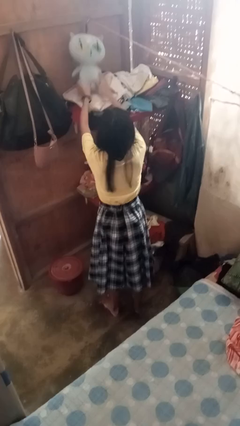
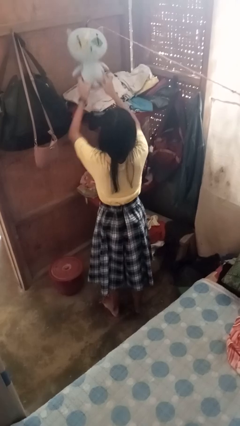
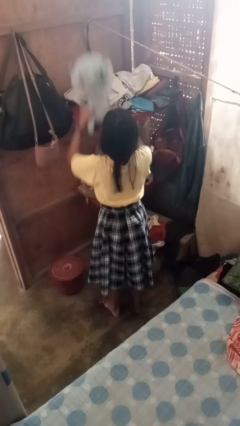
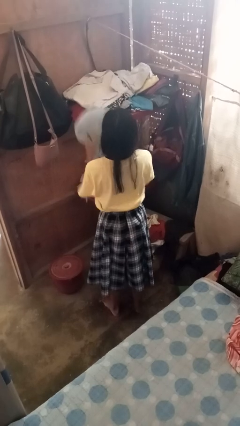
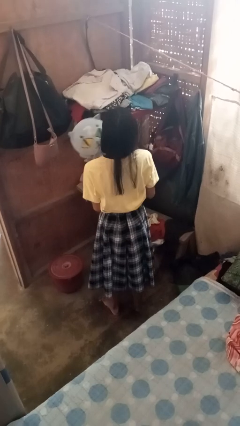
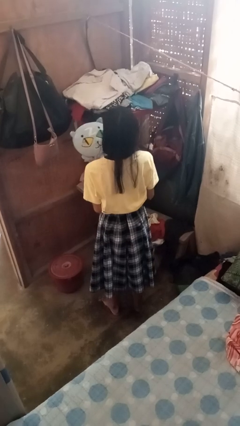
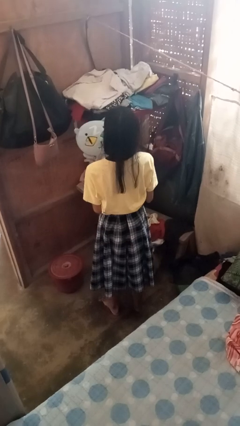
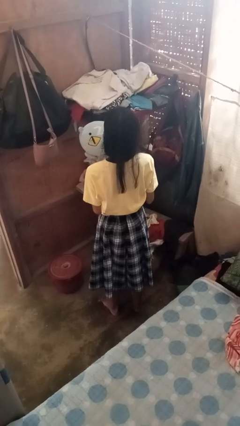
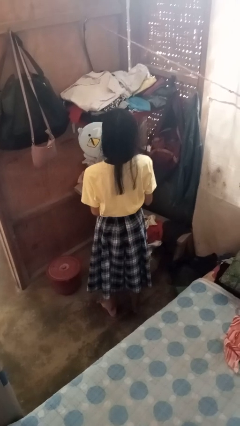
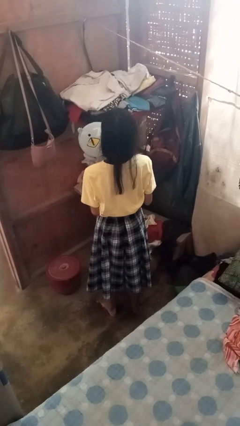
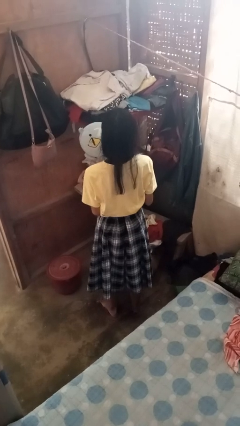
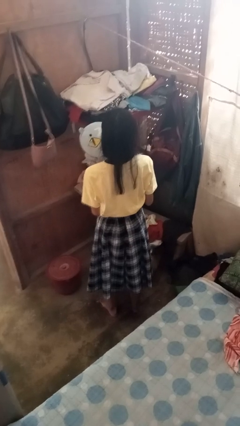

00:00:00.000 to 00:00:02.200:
person picks up object from shelf

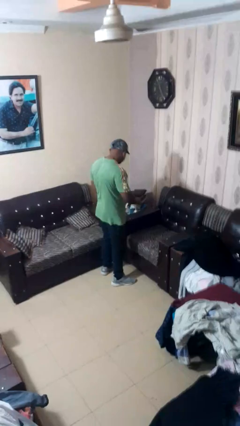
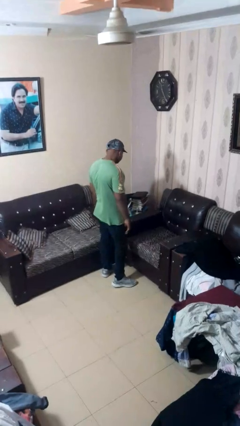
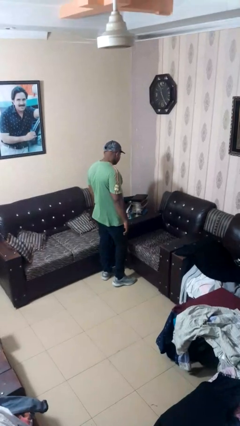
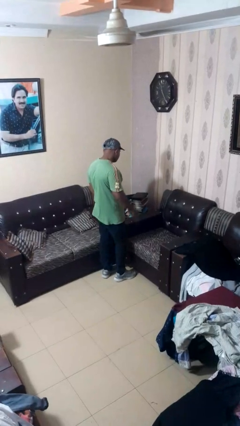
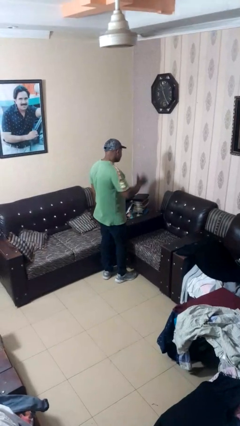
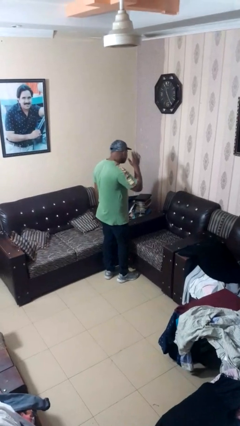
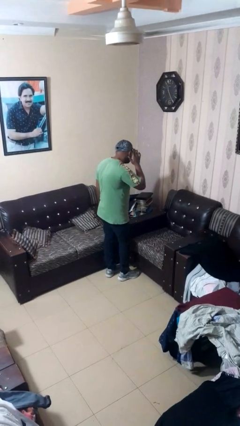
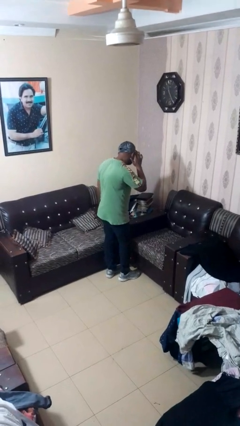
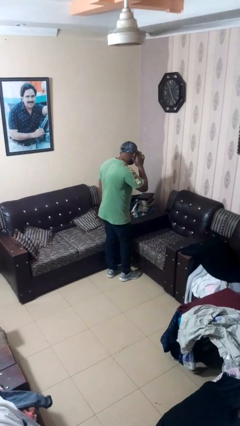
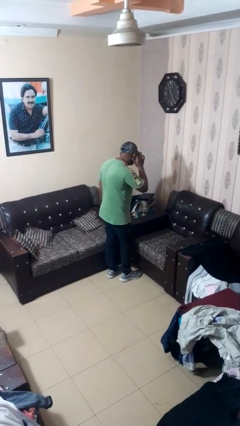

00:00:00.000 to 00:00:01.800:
person gestures listen closely

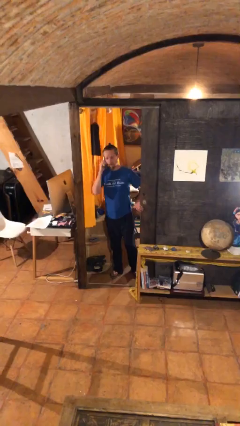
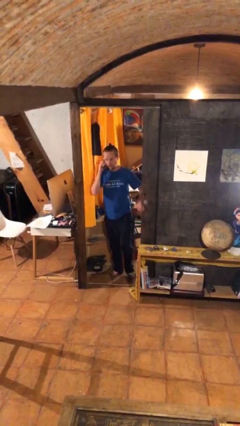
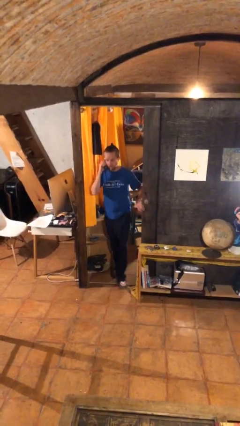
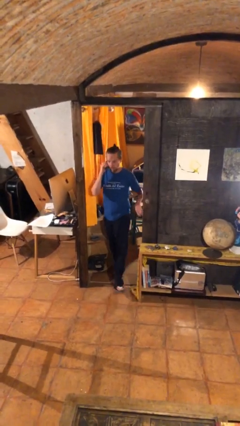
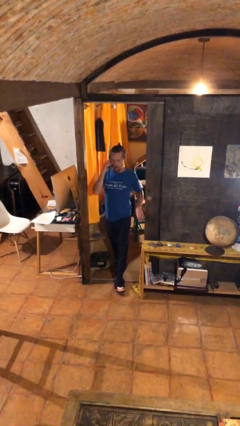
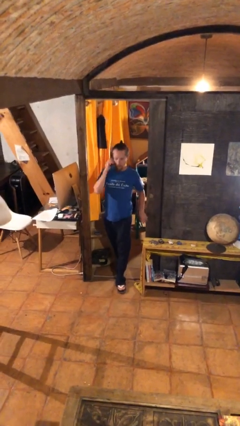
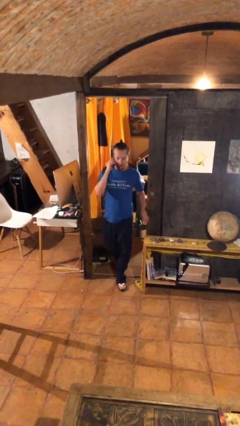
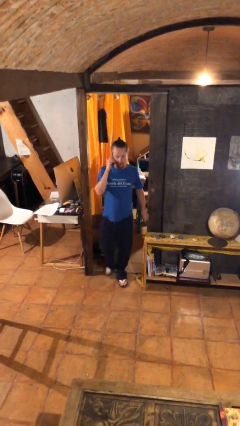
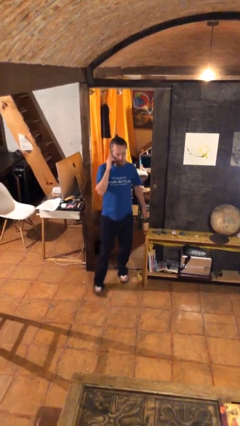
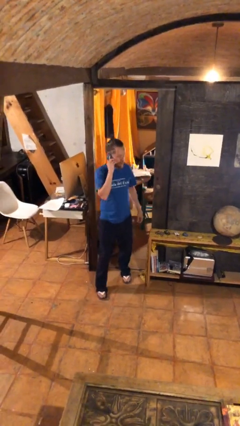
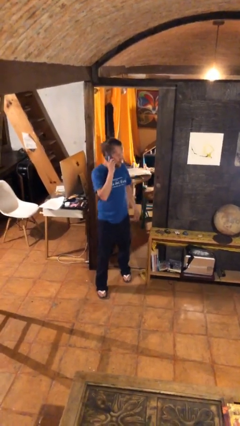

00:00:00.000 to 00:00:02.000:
person enters scene through structure

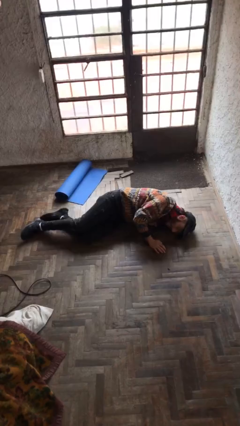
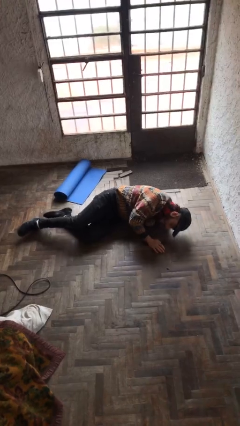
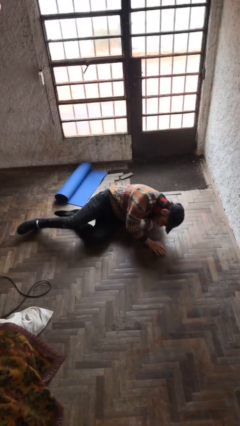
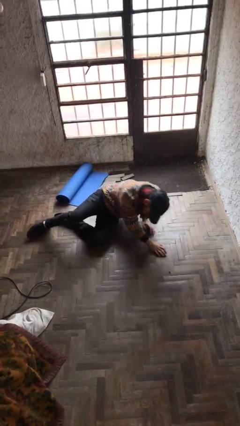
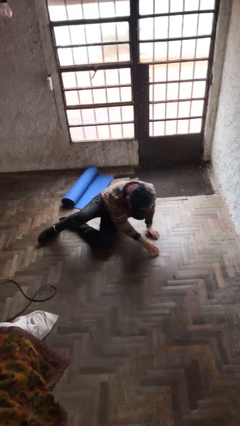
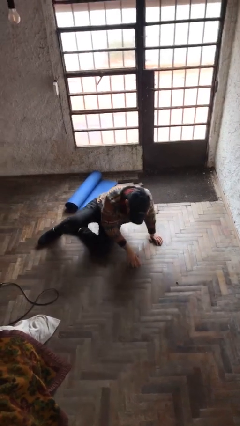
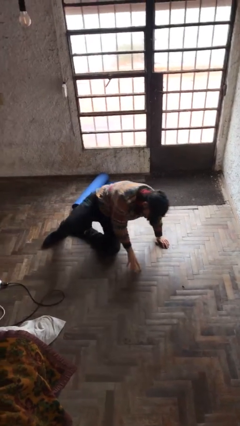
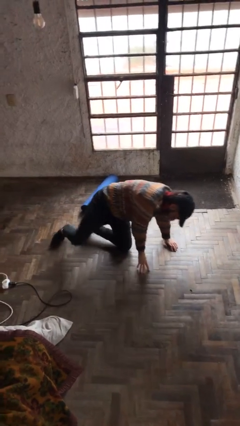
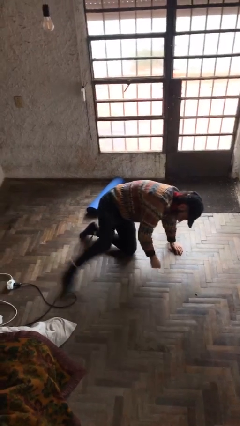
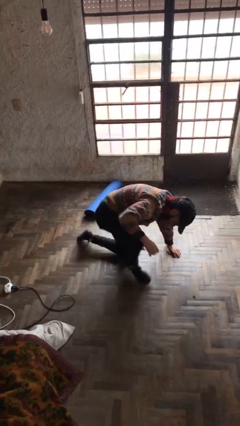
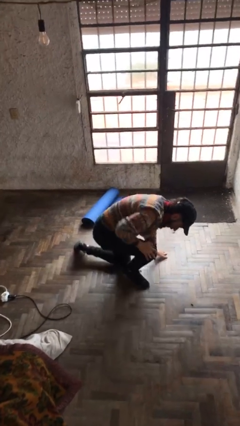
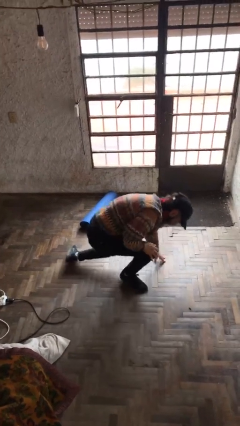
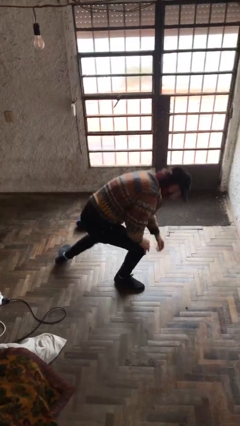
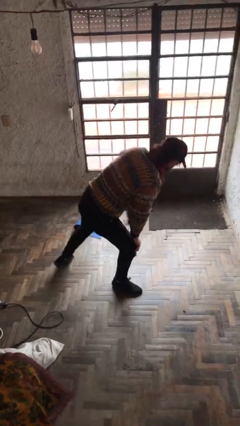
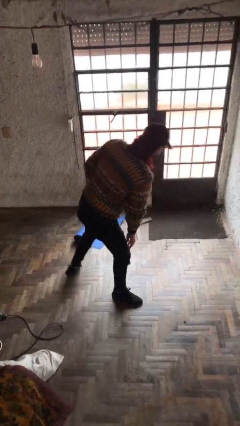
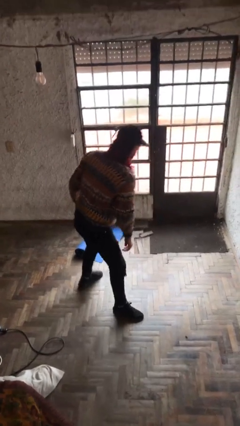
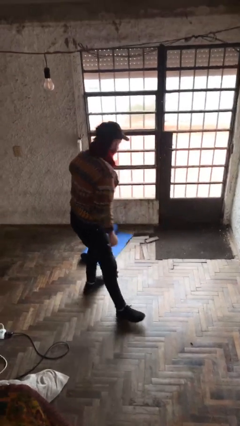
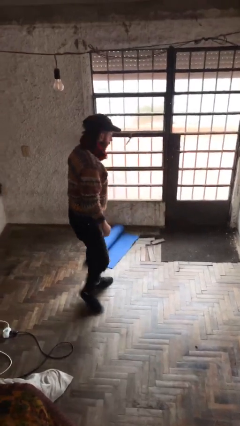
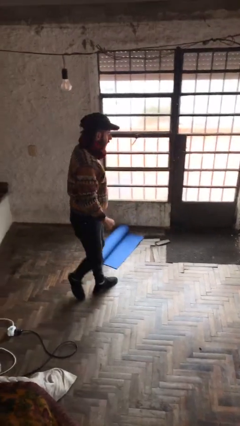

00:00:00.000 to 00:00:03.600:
person stands up from floor

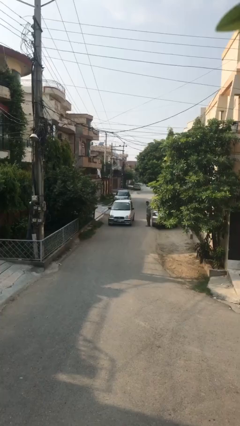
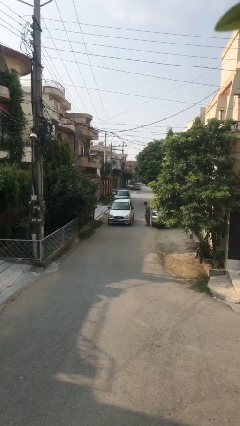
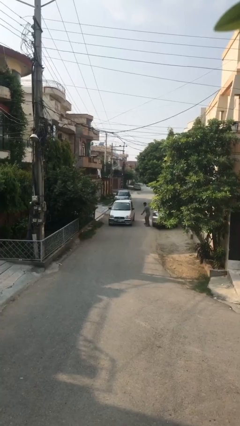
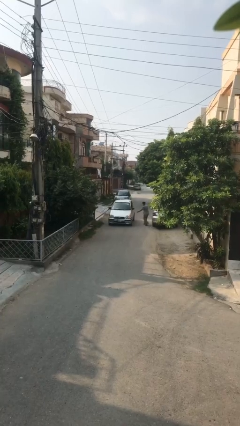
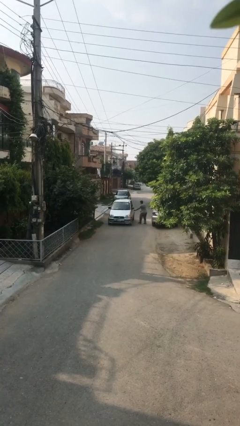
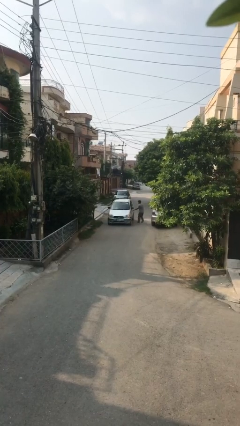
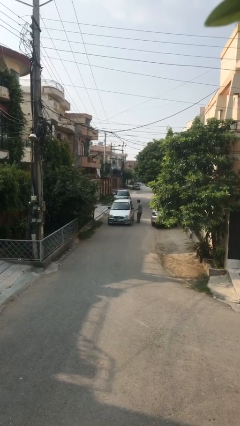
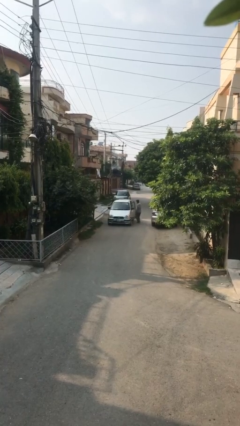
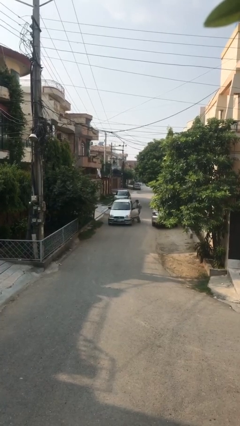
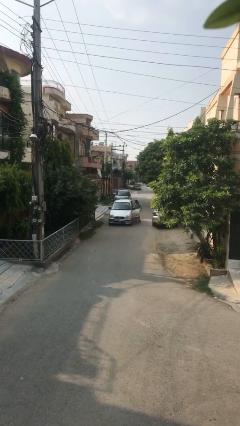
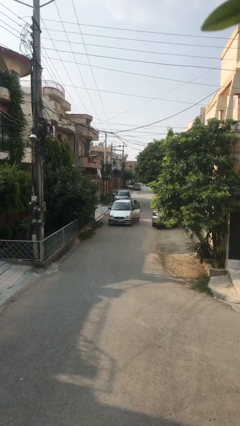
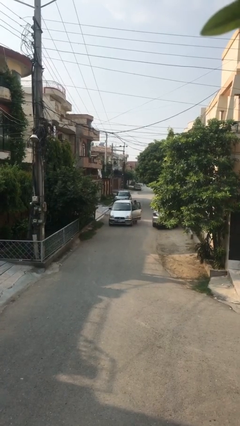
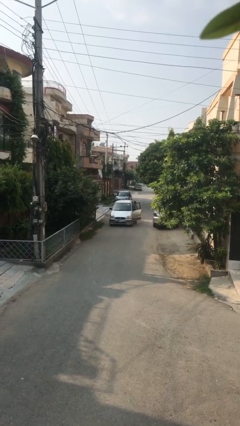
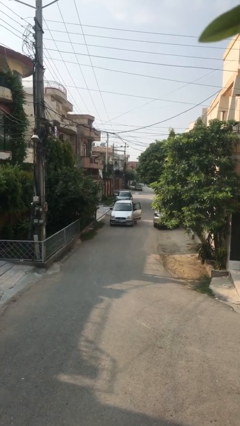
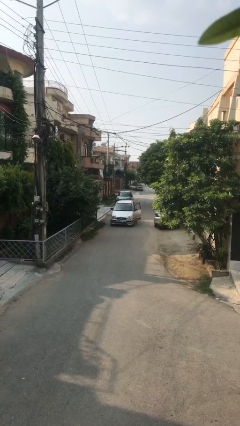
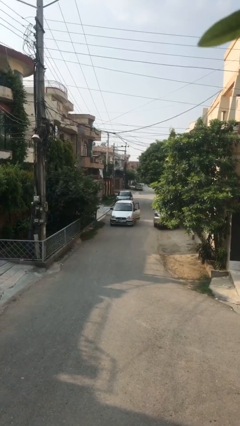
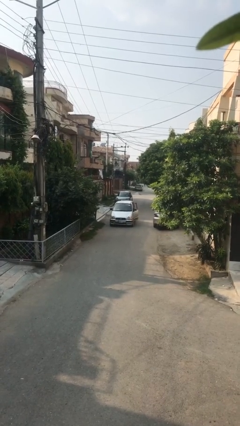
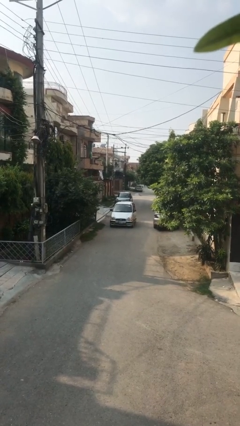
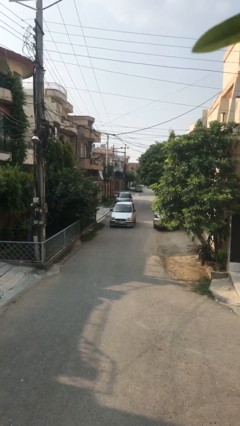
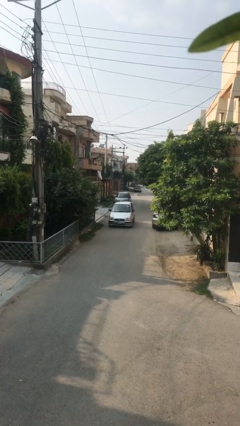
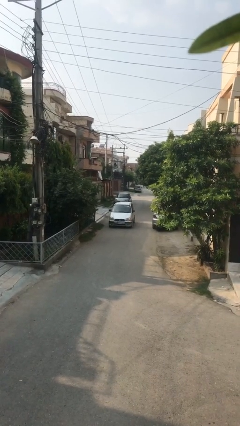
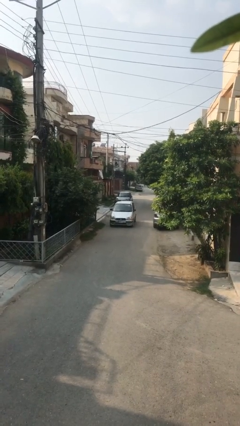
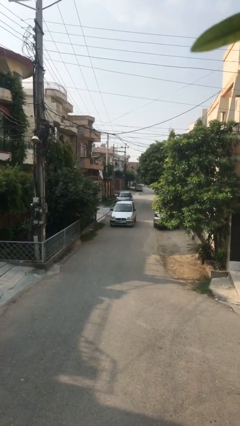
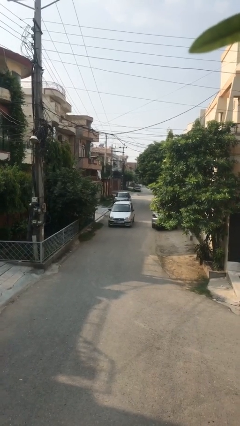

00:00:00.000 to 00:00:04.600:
car picks up person

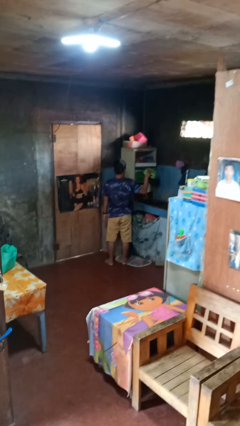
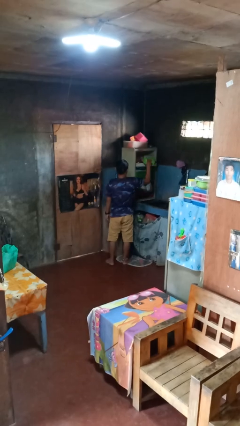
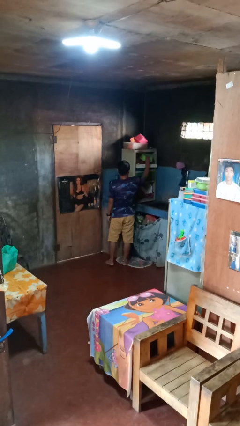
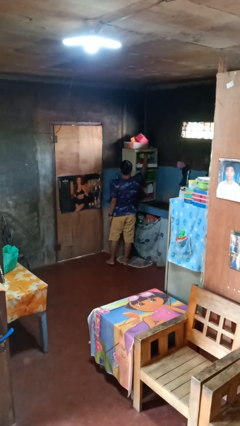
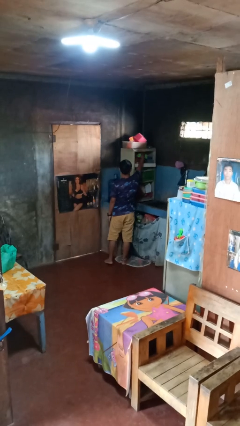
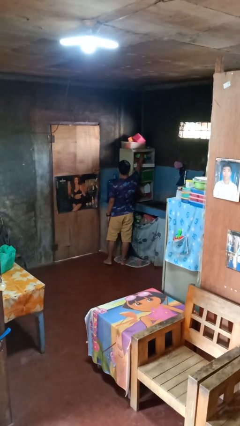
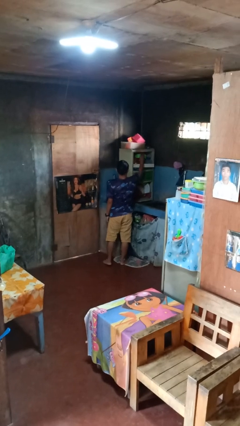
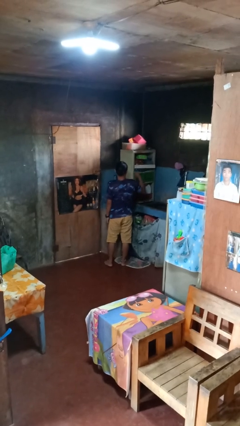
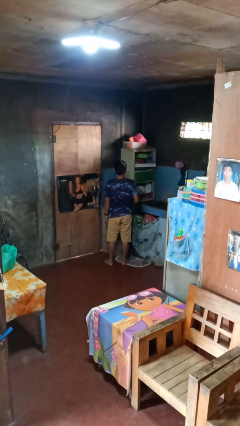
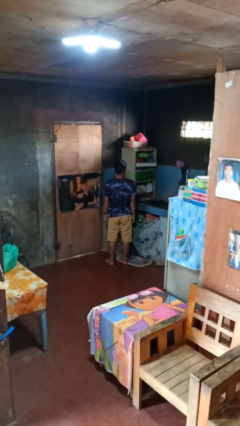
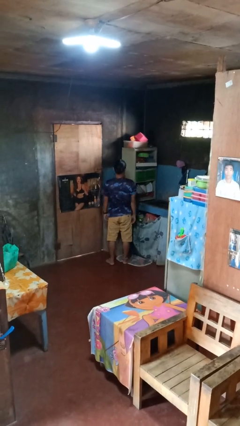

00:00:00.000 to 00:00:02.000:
person puts object in cabinet

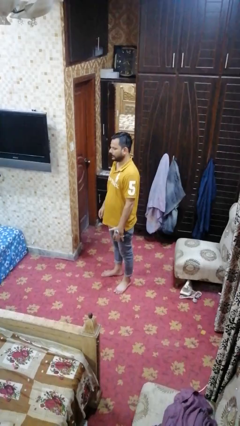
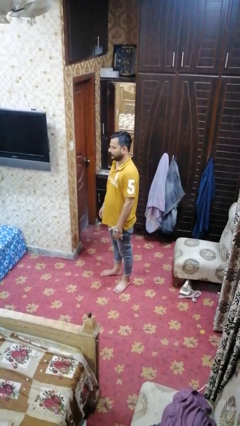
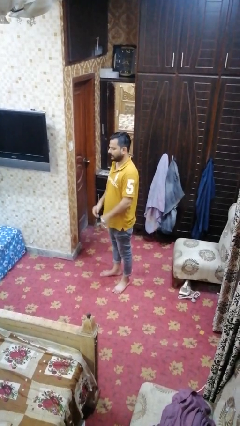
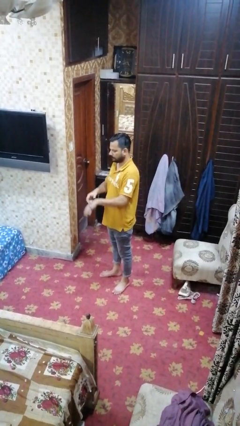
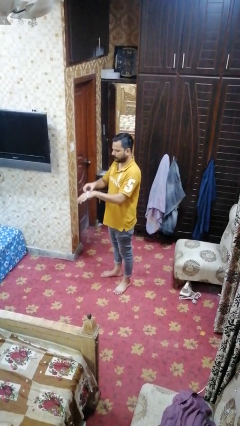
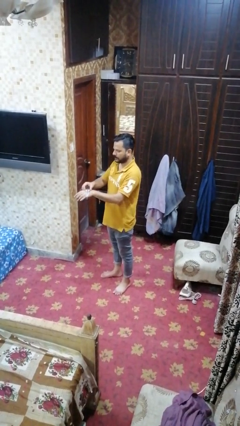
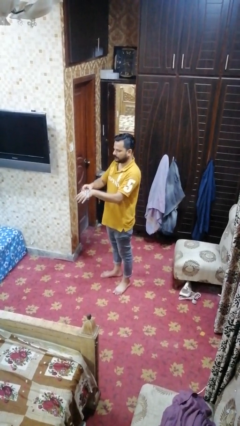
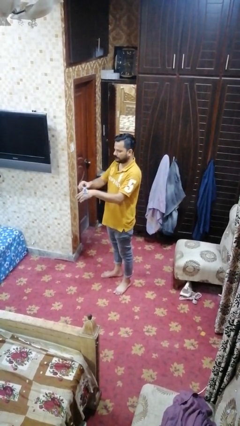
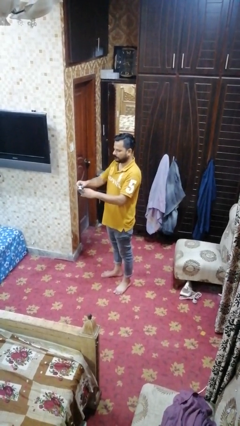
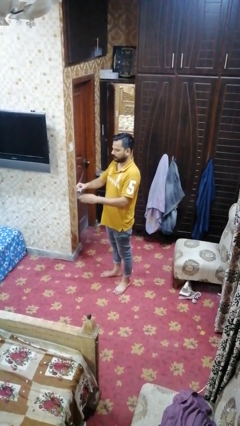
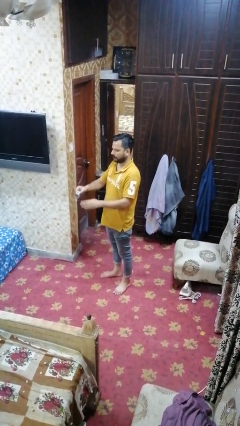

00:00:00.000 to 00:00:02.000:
person takes off wristwatch
